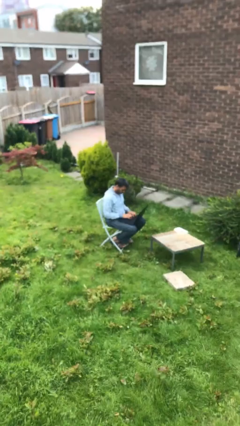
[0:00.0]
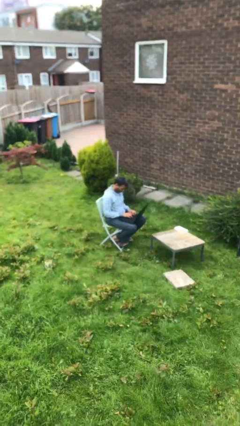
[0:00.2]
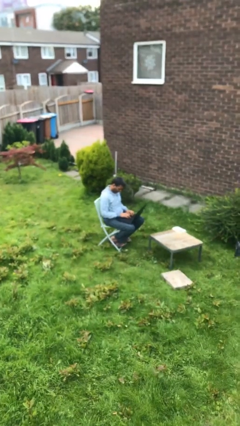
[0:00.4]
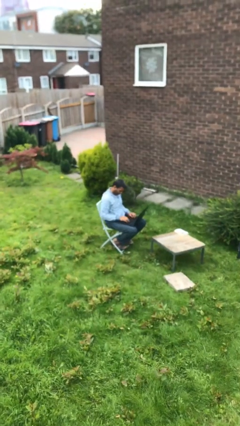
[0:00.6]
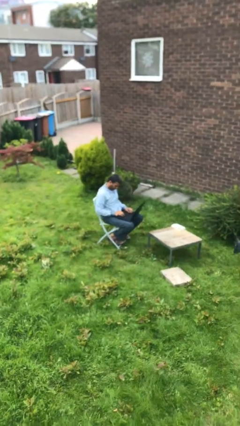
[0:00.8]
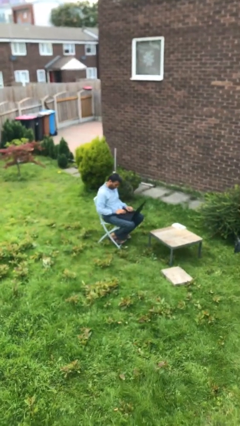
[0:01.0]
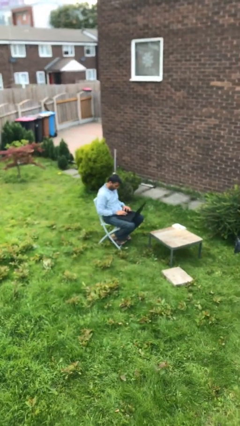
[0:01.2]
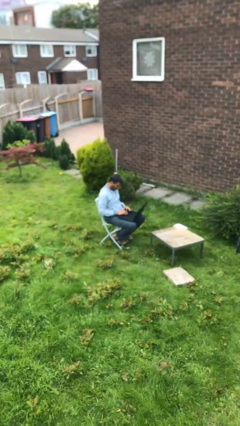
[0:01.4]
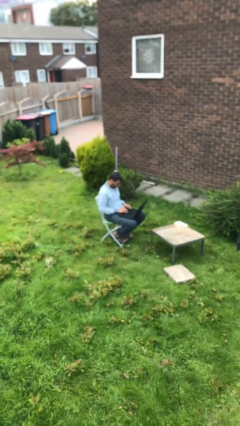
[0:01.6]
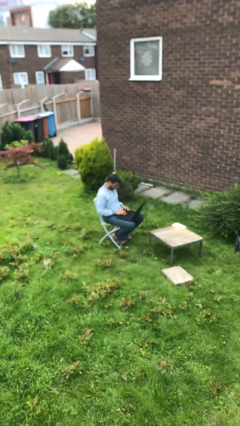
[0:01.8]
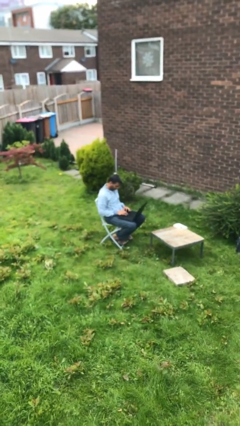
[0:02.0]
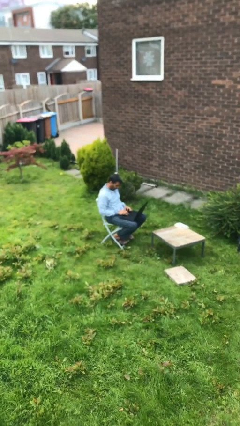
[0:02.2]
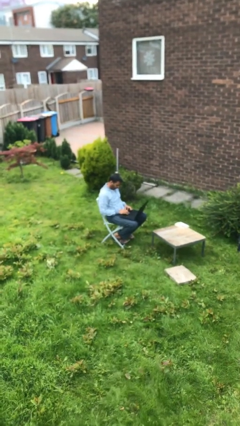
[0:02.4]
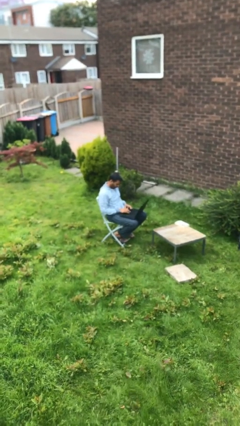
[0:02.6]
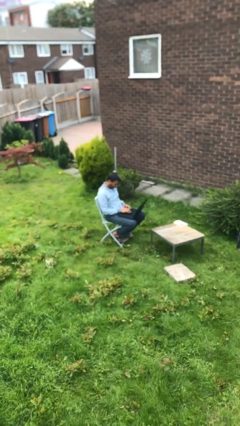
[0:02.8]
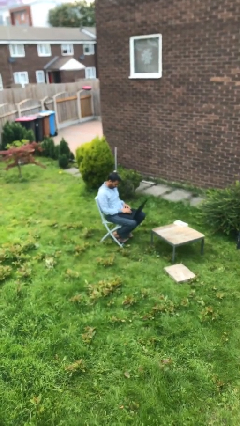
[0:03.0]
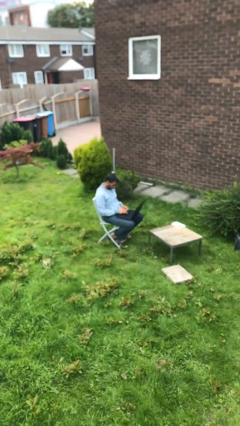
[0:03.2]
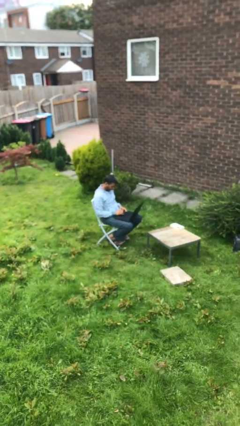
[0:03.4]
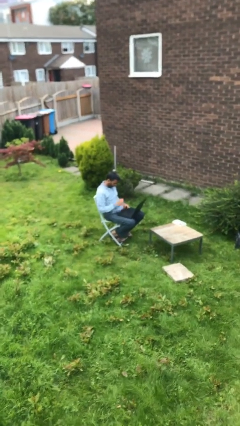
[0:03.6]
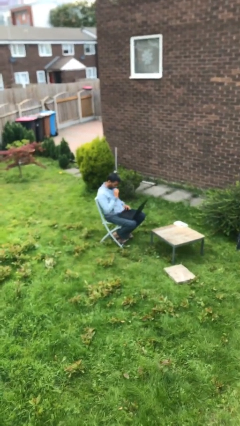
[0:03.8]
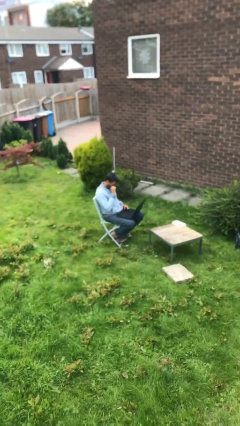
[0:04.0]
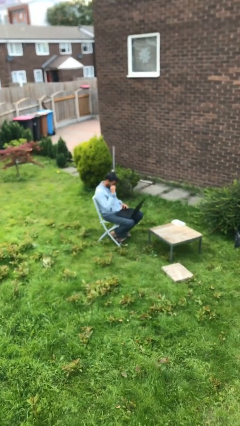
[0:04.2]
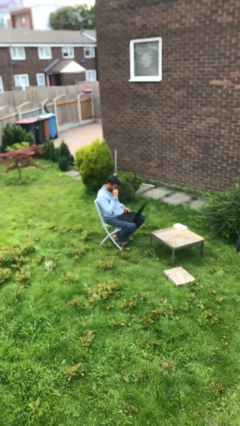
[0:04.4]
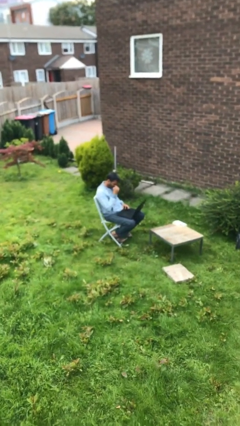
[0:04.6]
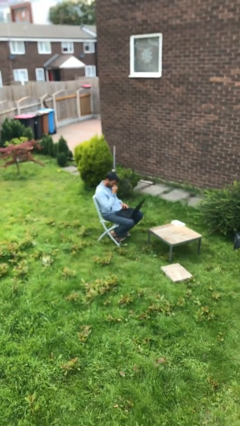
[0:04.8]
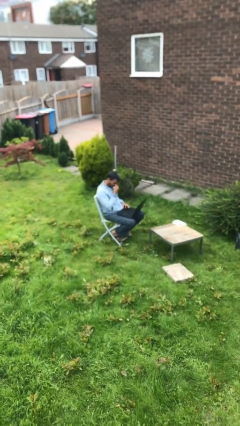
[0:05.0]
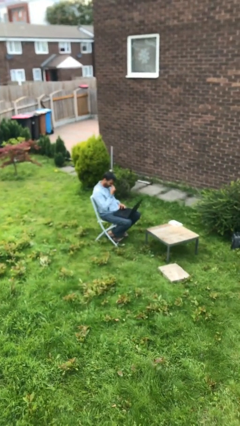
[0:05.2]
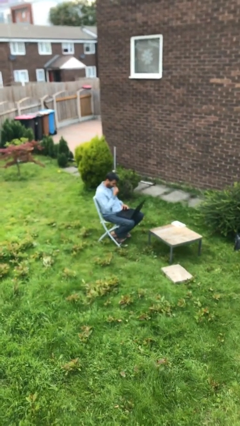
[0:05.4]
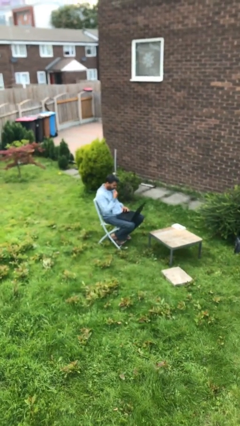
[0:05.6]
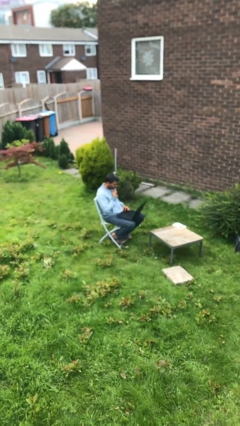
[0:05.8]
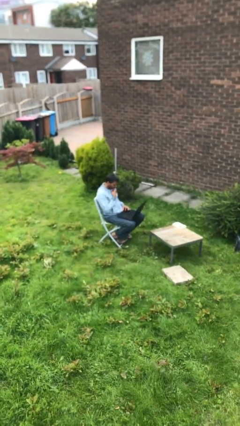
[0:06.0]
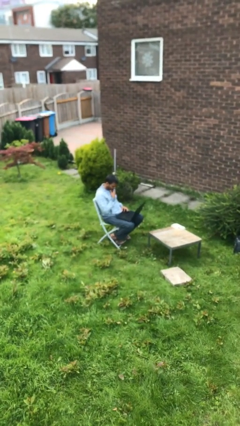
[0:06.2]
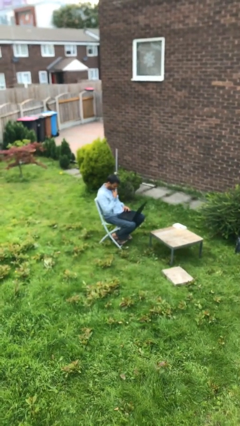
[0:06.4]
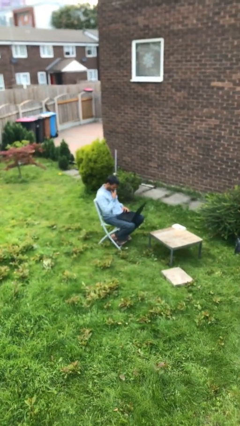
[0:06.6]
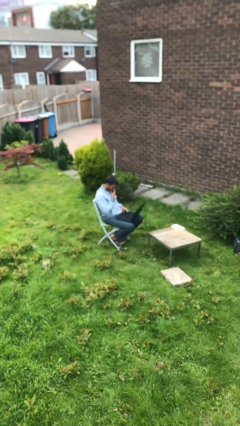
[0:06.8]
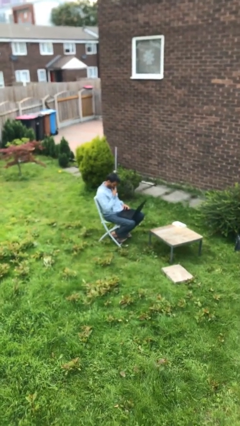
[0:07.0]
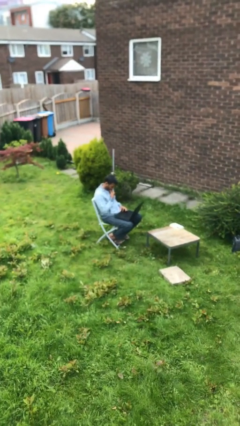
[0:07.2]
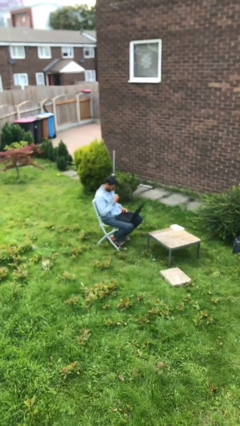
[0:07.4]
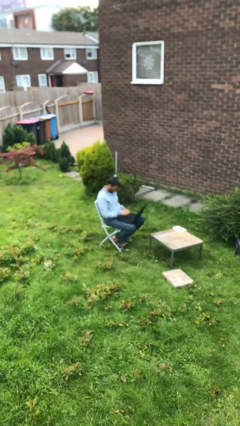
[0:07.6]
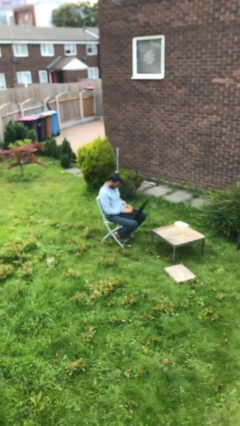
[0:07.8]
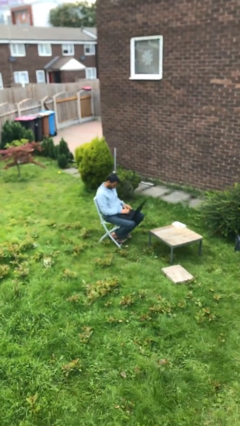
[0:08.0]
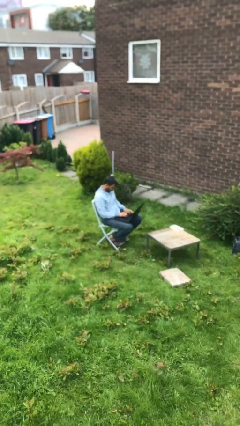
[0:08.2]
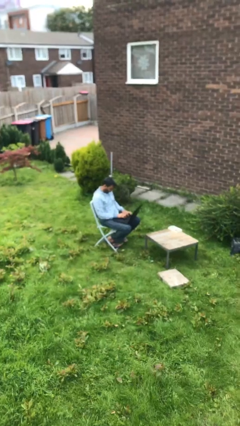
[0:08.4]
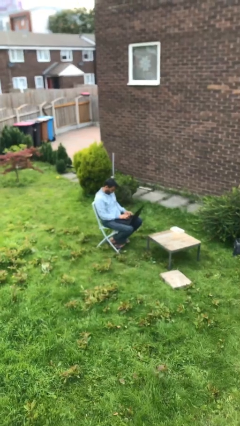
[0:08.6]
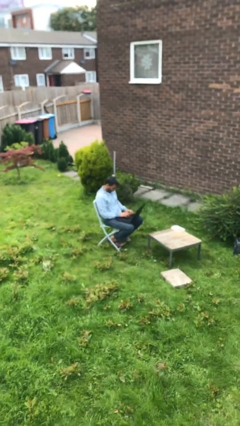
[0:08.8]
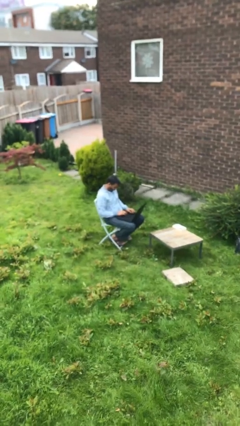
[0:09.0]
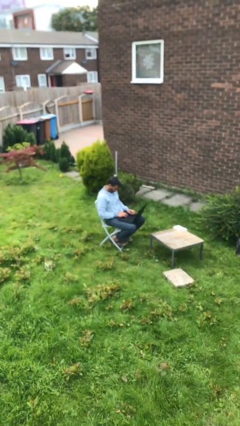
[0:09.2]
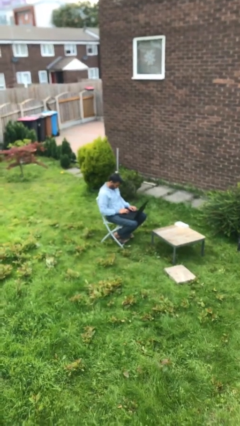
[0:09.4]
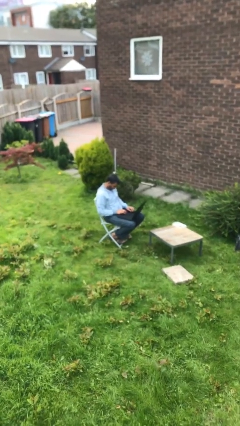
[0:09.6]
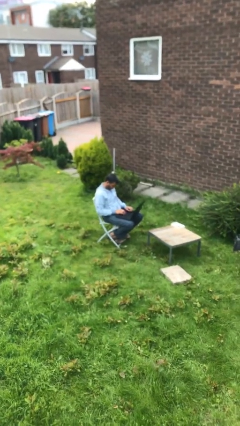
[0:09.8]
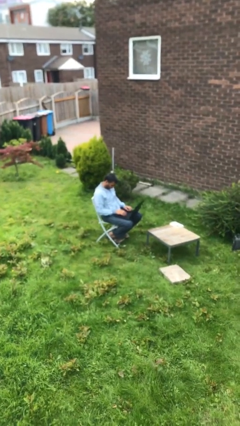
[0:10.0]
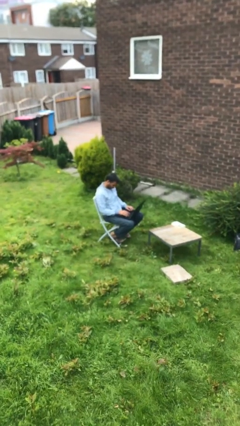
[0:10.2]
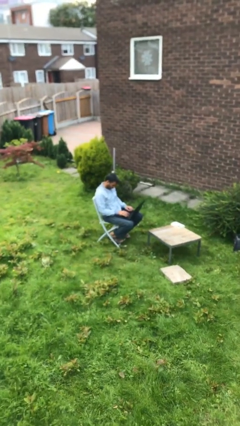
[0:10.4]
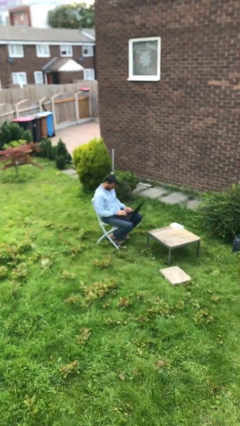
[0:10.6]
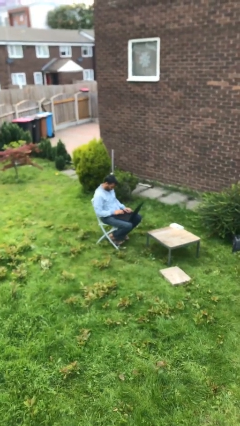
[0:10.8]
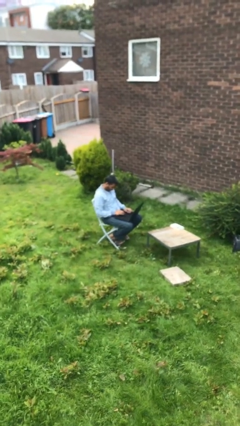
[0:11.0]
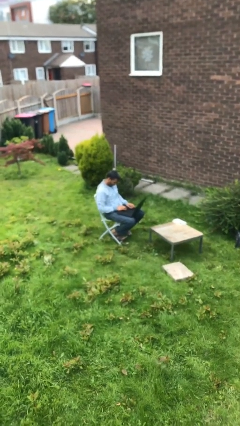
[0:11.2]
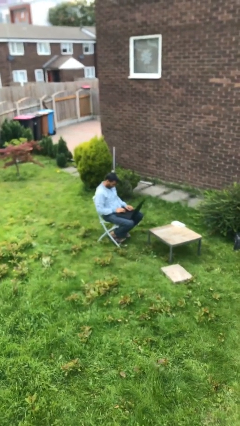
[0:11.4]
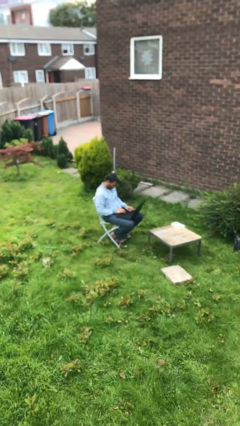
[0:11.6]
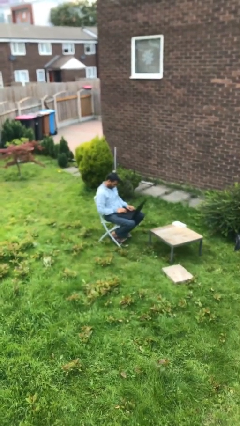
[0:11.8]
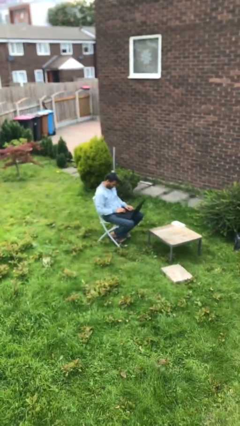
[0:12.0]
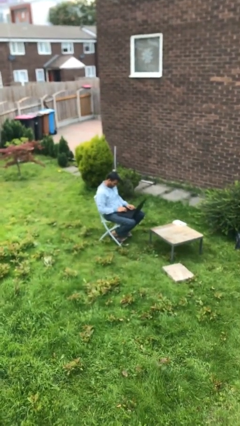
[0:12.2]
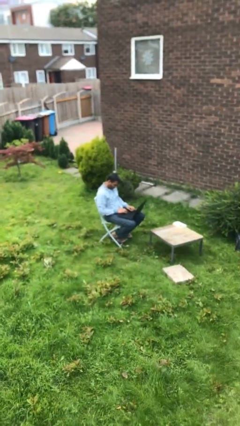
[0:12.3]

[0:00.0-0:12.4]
person interacts with laptop

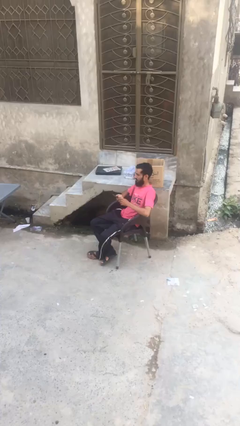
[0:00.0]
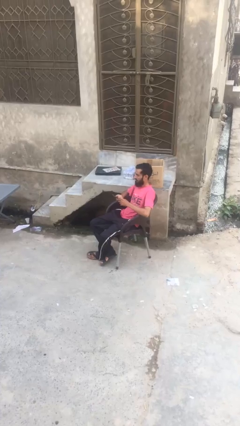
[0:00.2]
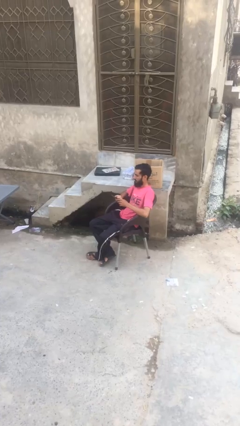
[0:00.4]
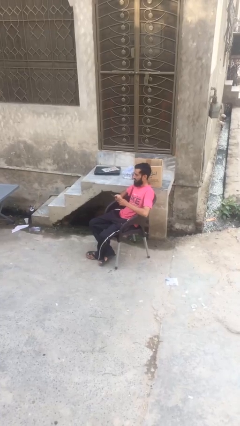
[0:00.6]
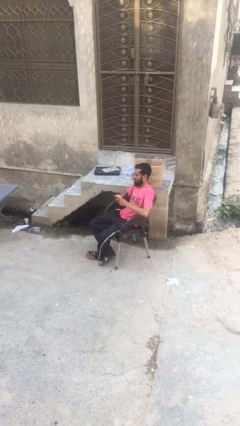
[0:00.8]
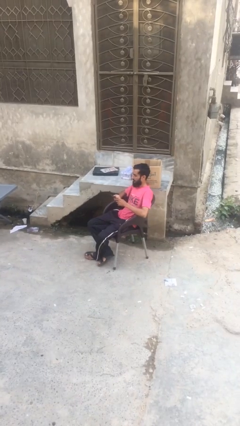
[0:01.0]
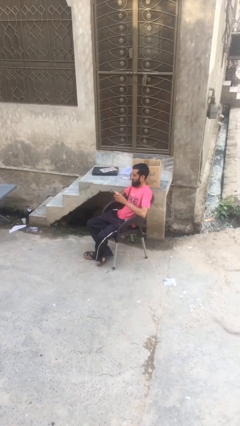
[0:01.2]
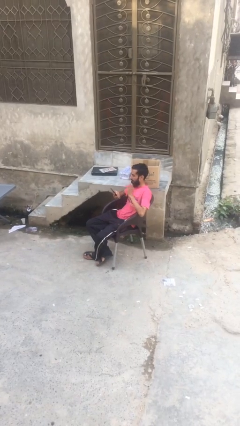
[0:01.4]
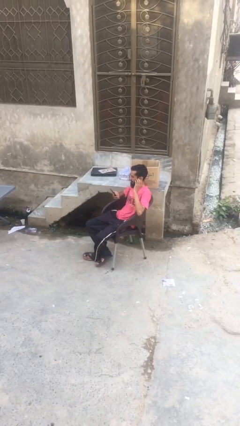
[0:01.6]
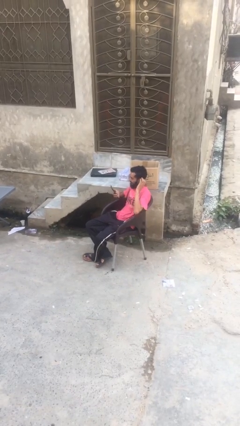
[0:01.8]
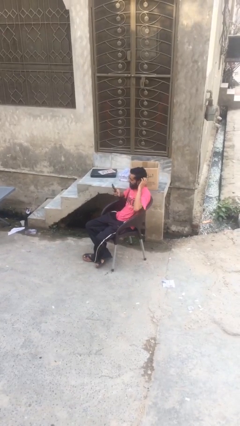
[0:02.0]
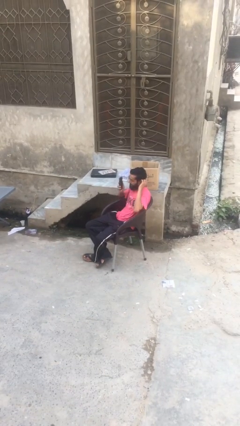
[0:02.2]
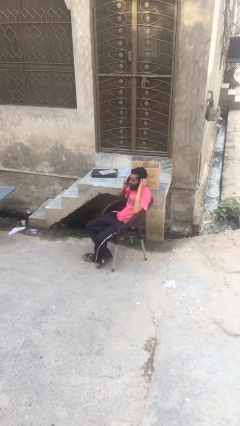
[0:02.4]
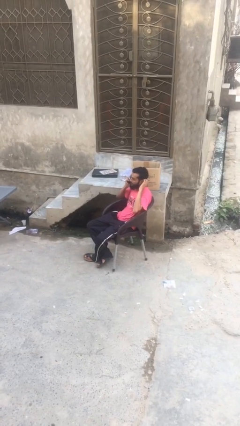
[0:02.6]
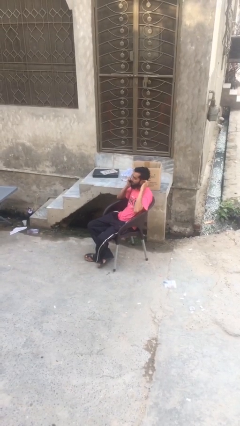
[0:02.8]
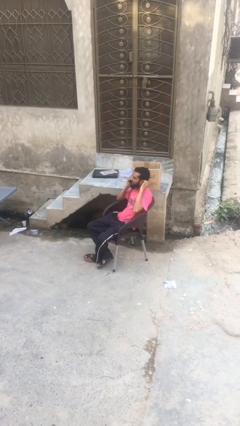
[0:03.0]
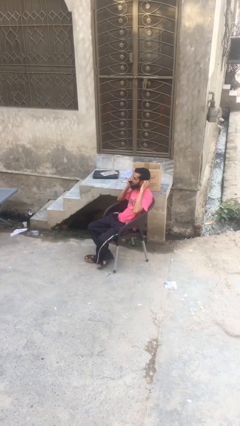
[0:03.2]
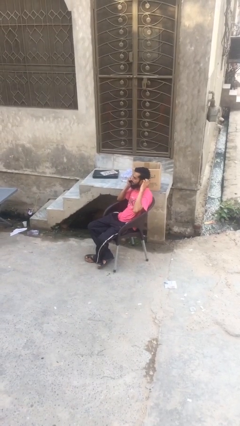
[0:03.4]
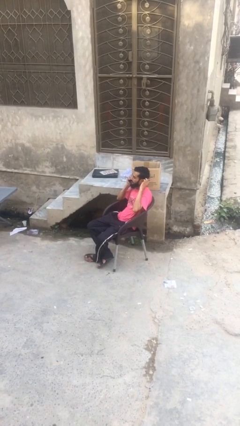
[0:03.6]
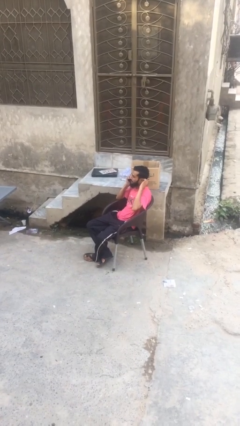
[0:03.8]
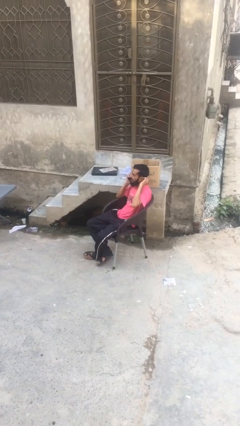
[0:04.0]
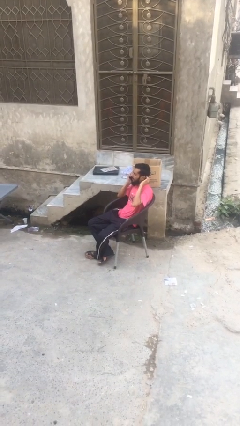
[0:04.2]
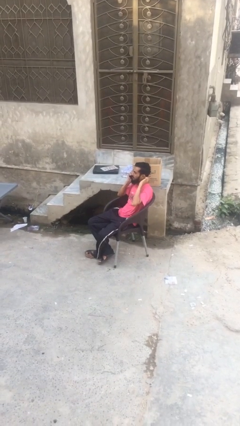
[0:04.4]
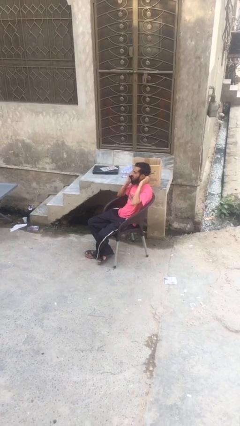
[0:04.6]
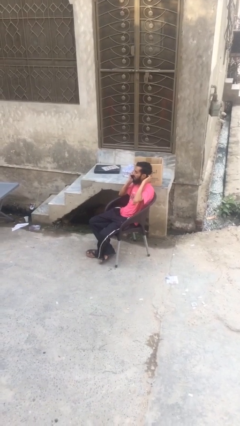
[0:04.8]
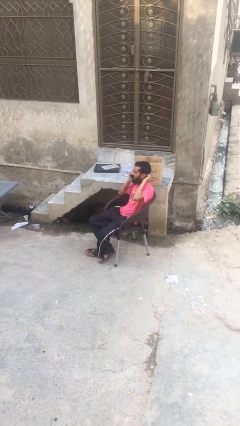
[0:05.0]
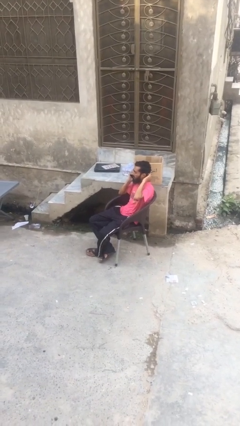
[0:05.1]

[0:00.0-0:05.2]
person talks on phone

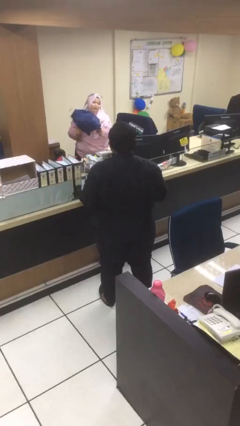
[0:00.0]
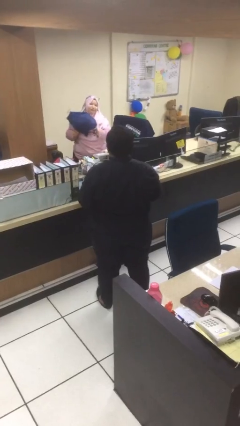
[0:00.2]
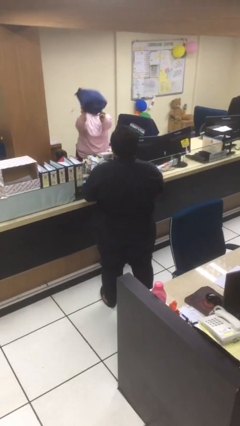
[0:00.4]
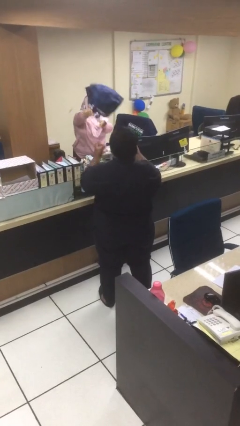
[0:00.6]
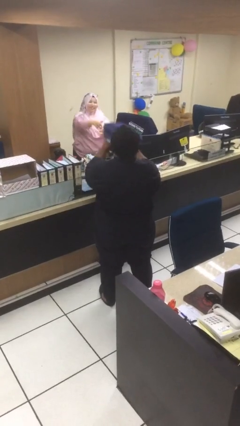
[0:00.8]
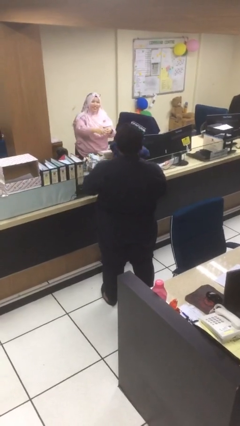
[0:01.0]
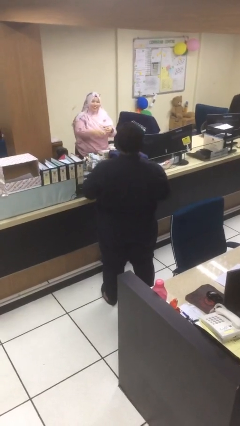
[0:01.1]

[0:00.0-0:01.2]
person catches object from person
